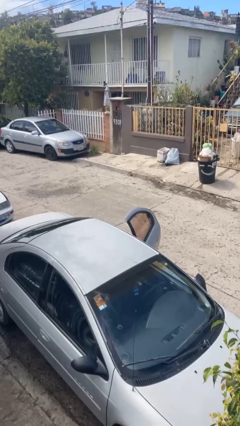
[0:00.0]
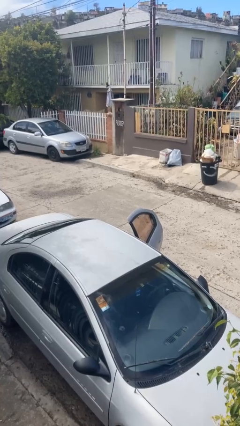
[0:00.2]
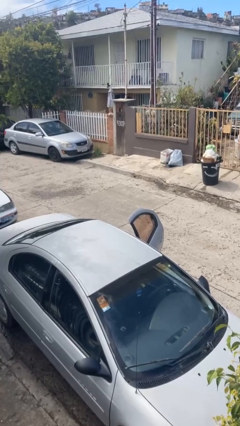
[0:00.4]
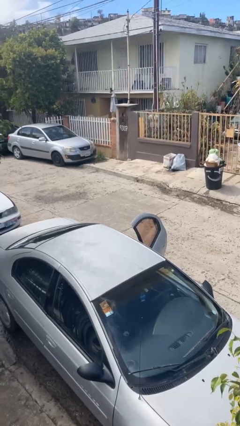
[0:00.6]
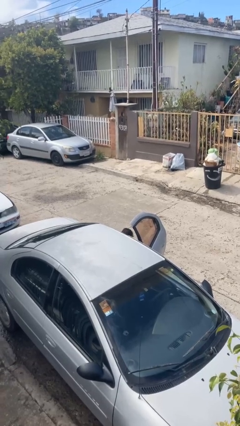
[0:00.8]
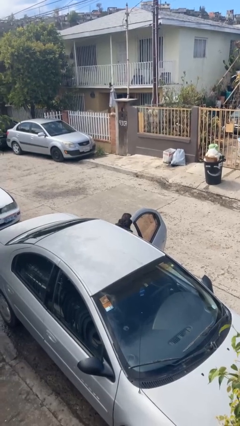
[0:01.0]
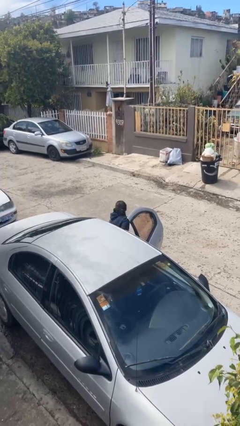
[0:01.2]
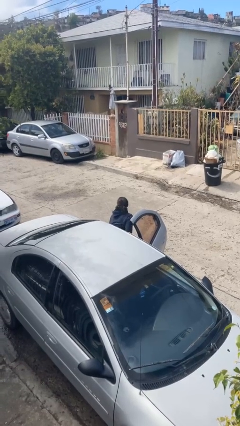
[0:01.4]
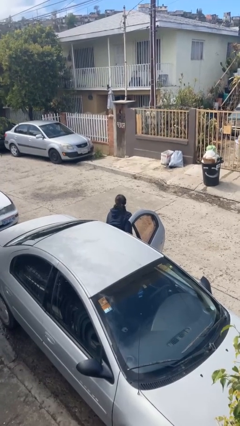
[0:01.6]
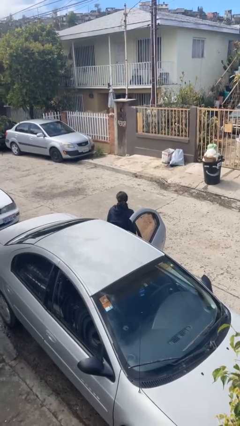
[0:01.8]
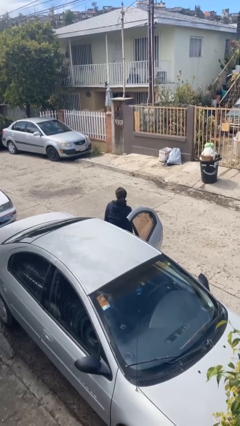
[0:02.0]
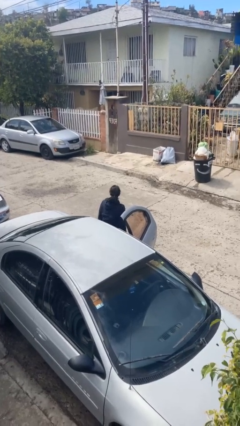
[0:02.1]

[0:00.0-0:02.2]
person exits car

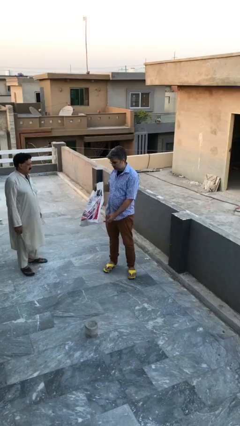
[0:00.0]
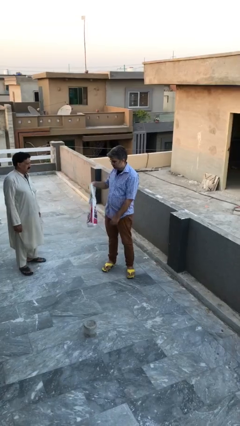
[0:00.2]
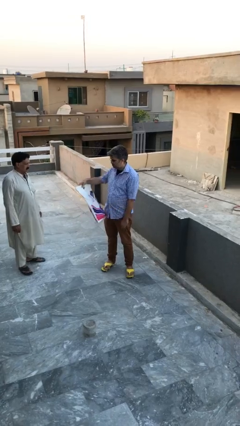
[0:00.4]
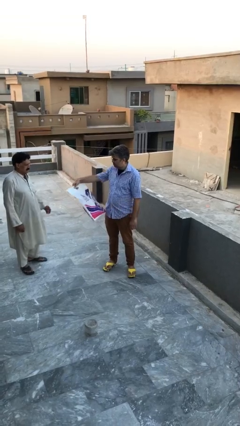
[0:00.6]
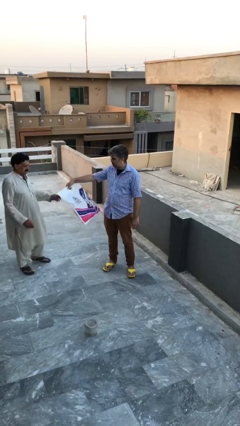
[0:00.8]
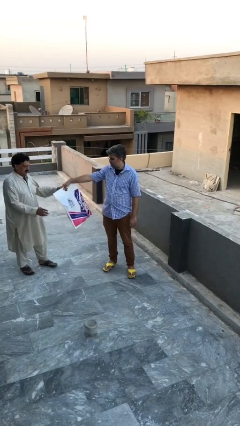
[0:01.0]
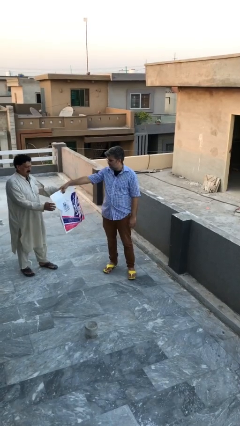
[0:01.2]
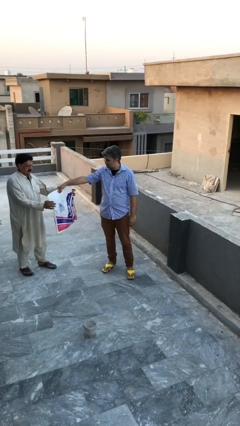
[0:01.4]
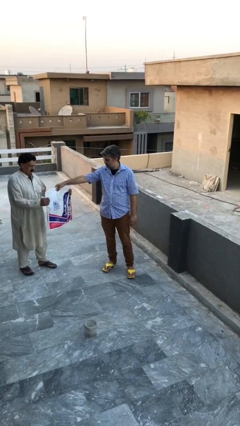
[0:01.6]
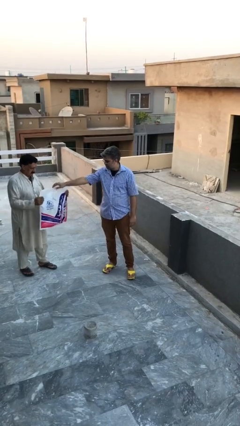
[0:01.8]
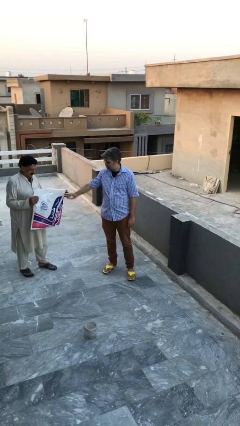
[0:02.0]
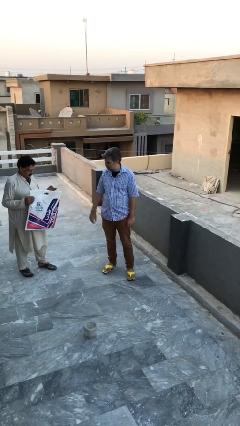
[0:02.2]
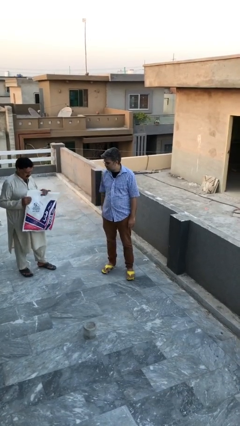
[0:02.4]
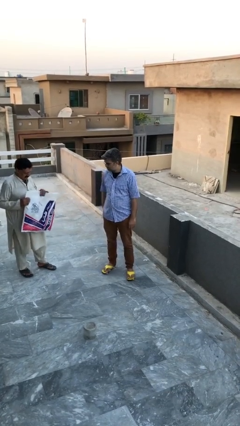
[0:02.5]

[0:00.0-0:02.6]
person transfers object to person

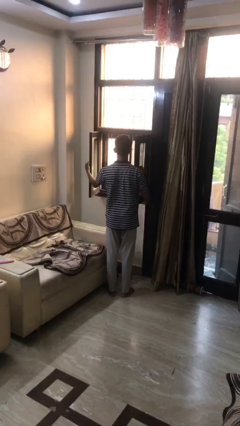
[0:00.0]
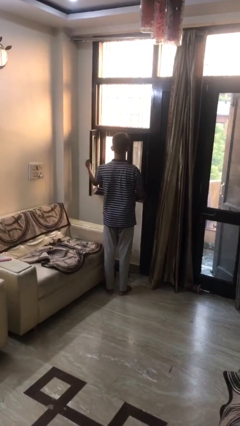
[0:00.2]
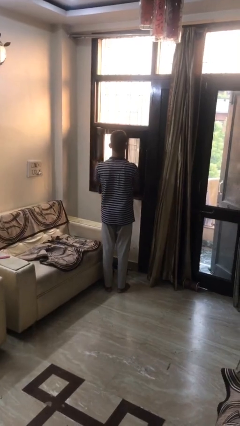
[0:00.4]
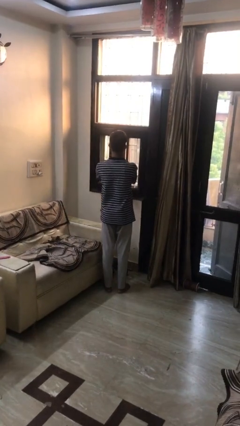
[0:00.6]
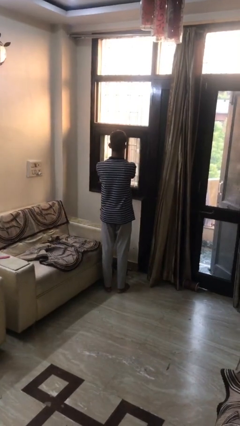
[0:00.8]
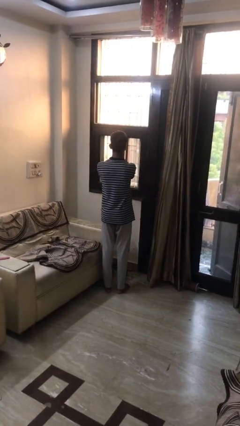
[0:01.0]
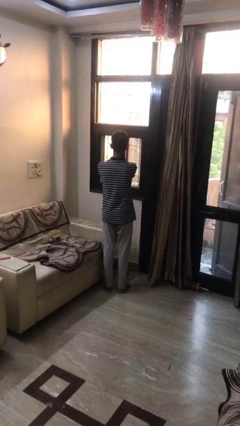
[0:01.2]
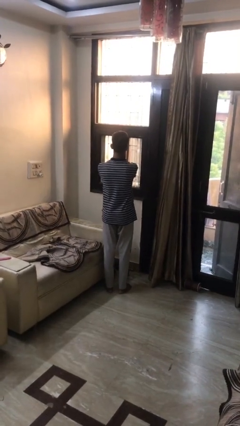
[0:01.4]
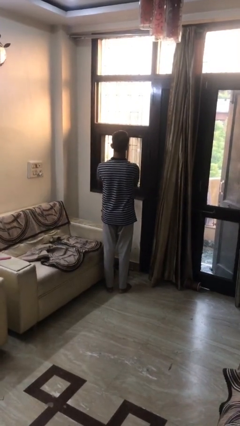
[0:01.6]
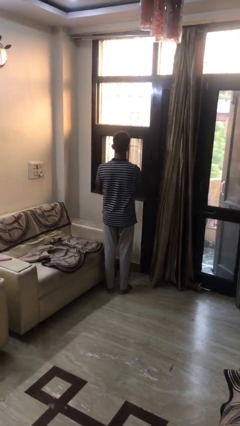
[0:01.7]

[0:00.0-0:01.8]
person closes home window

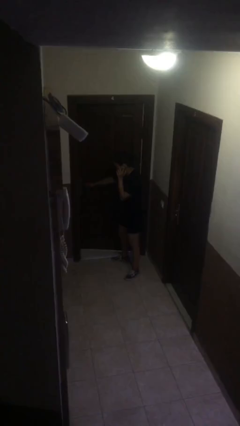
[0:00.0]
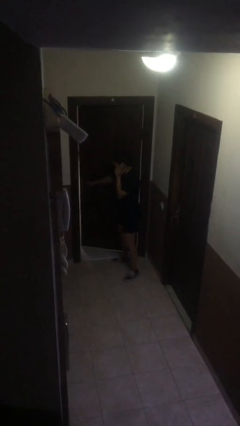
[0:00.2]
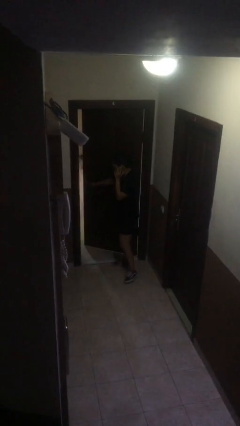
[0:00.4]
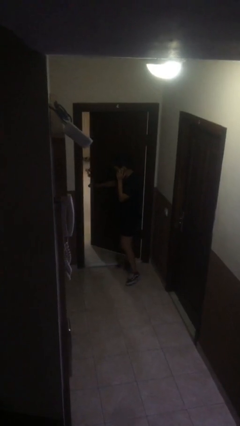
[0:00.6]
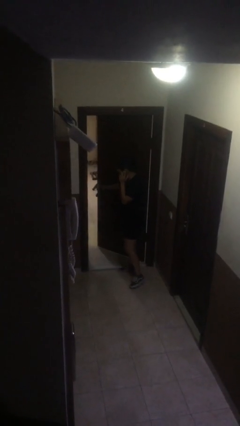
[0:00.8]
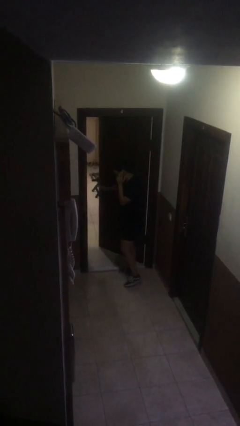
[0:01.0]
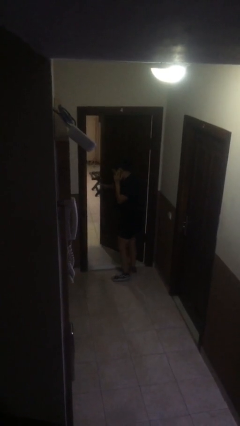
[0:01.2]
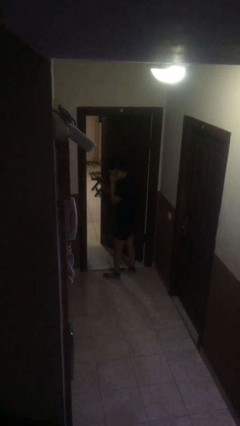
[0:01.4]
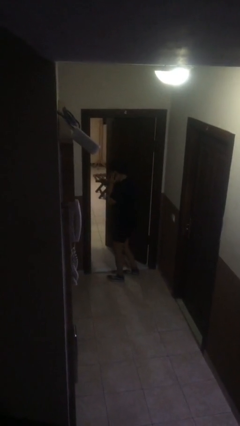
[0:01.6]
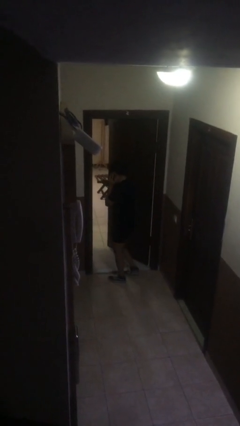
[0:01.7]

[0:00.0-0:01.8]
person opens facility door

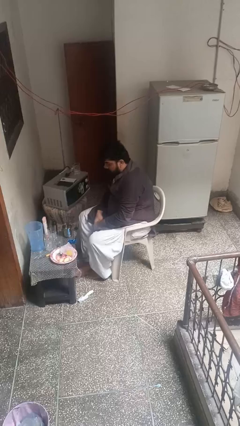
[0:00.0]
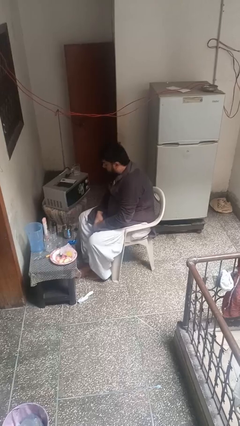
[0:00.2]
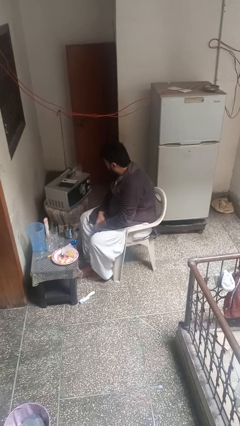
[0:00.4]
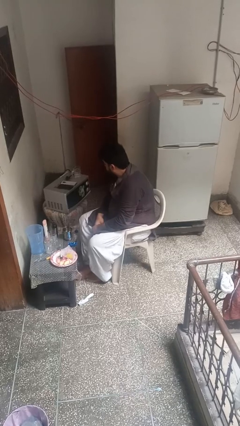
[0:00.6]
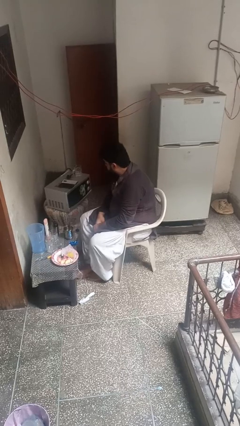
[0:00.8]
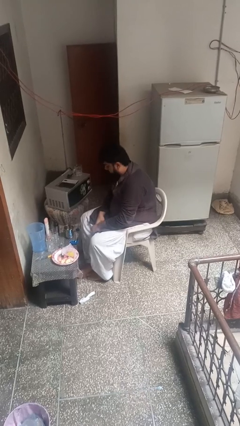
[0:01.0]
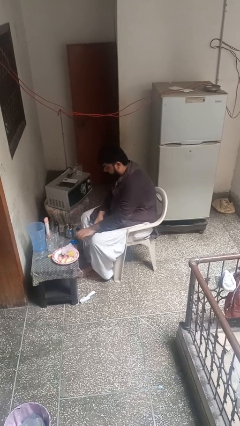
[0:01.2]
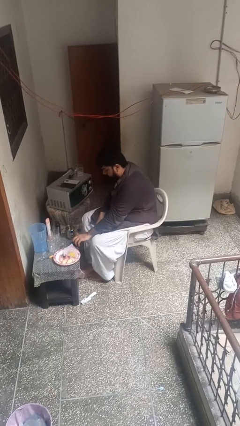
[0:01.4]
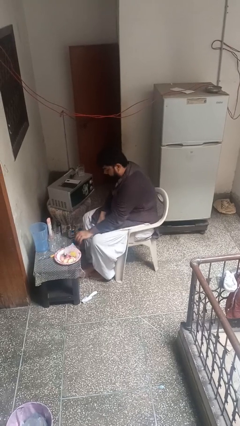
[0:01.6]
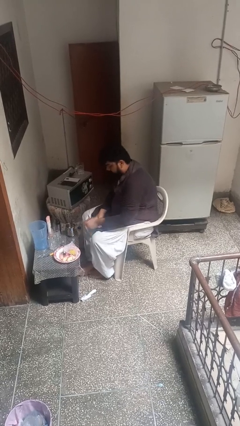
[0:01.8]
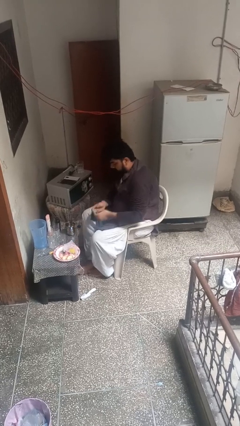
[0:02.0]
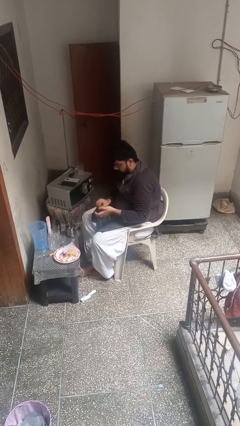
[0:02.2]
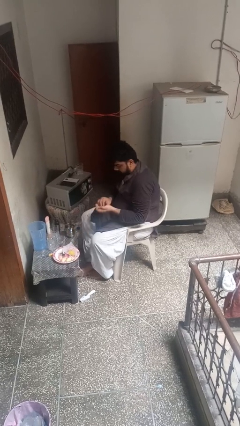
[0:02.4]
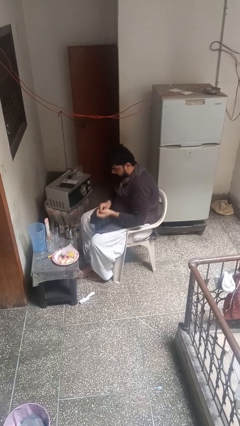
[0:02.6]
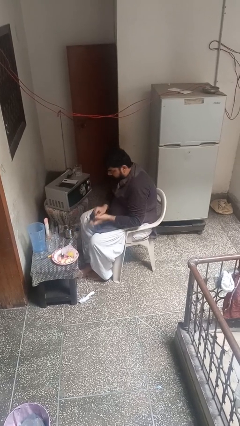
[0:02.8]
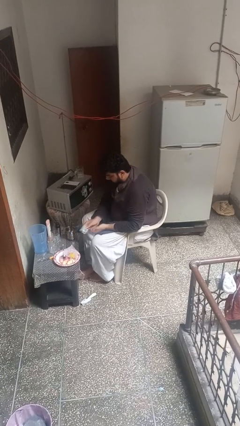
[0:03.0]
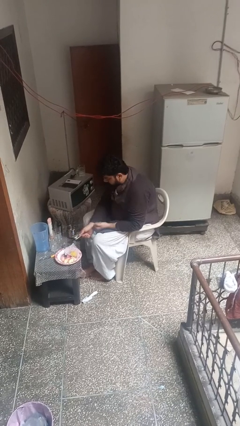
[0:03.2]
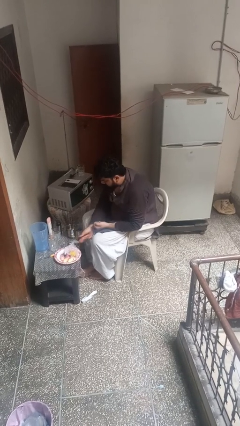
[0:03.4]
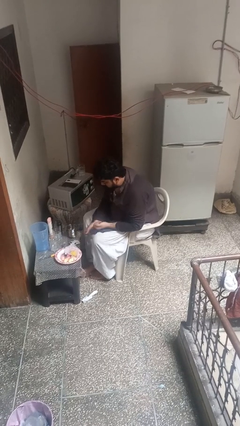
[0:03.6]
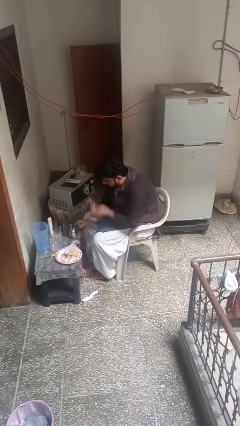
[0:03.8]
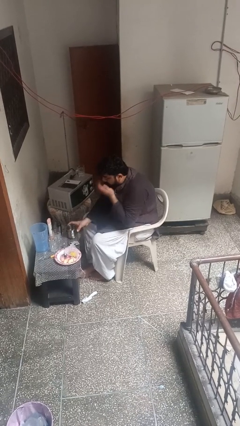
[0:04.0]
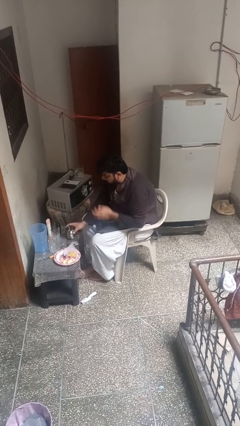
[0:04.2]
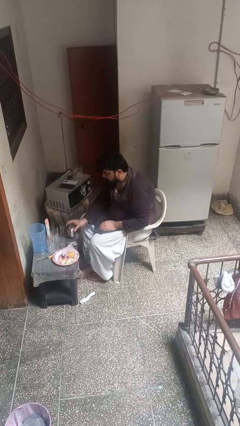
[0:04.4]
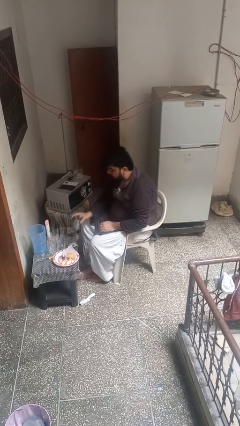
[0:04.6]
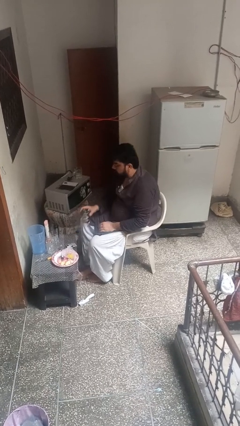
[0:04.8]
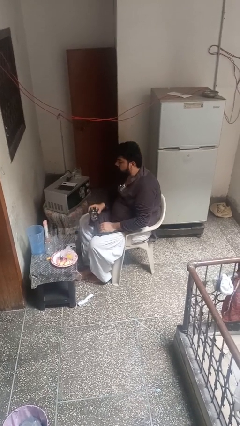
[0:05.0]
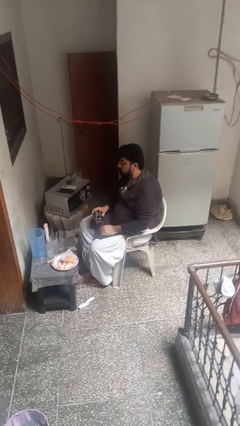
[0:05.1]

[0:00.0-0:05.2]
person takes medicine pills

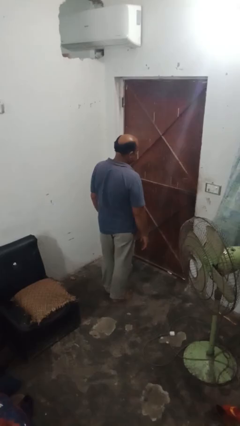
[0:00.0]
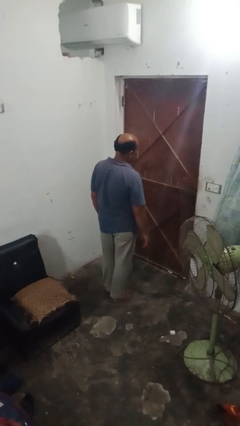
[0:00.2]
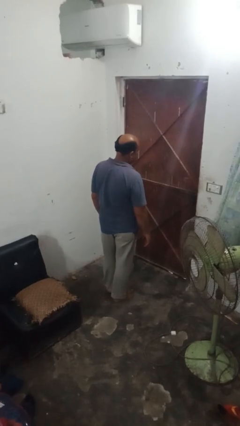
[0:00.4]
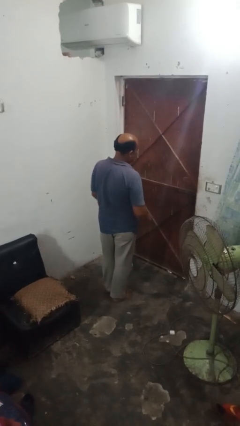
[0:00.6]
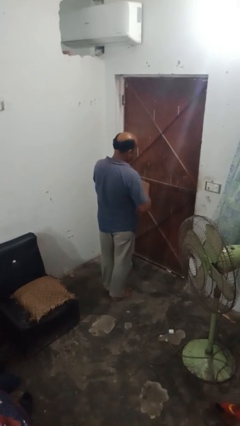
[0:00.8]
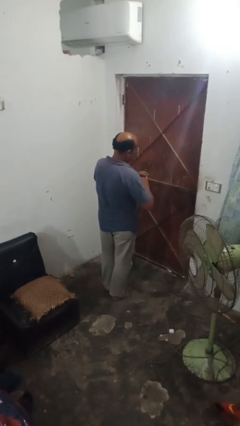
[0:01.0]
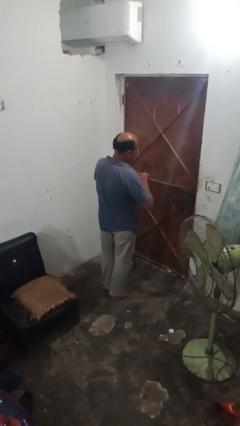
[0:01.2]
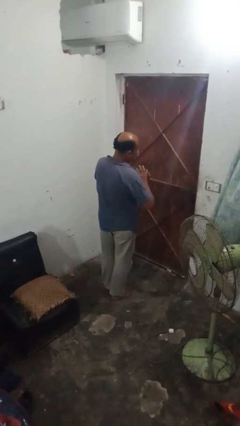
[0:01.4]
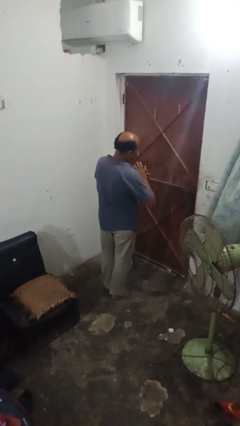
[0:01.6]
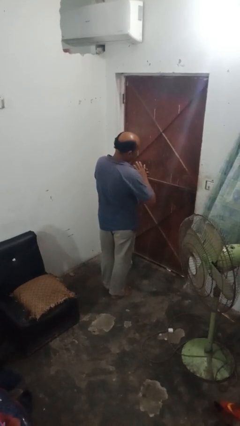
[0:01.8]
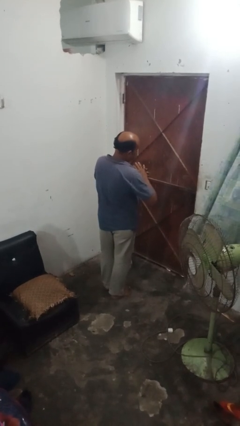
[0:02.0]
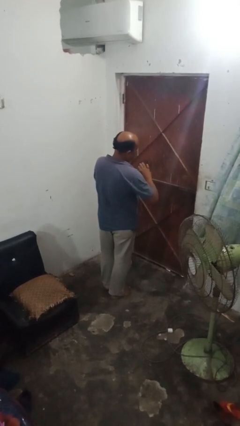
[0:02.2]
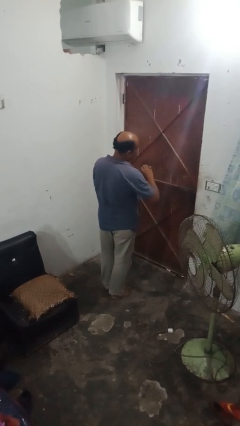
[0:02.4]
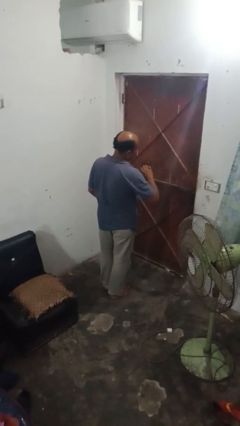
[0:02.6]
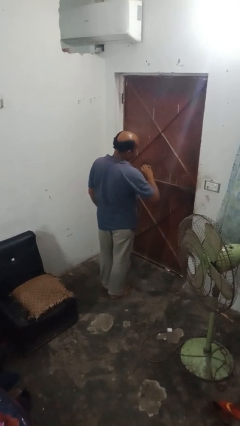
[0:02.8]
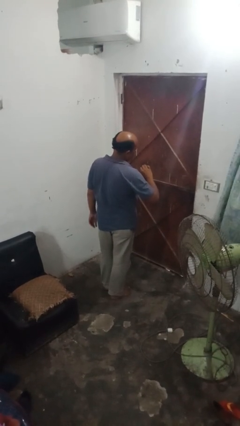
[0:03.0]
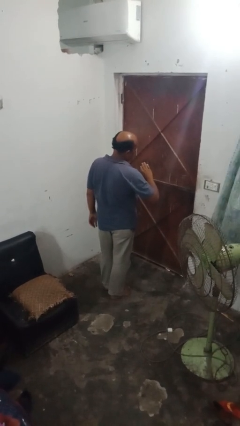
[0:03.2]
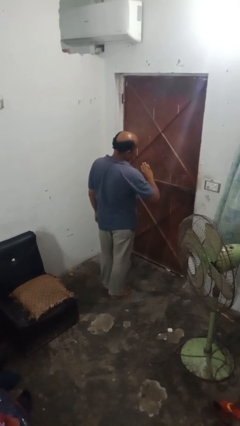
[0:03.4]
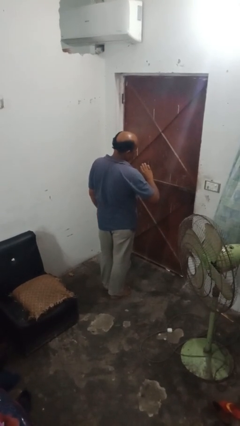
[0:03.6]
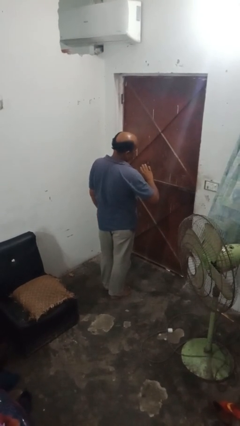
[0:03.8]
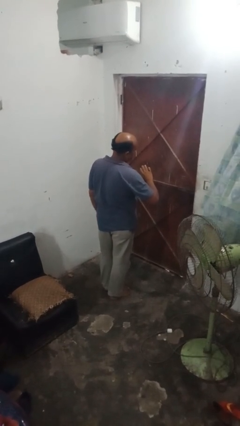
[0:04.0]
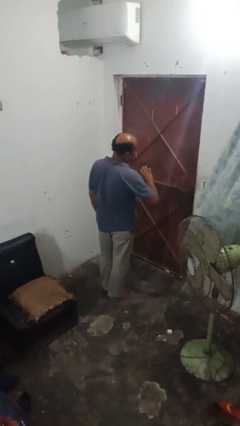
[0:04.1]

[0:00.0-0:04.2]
person puts on ring
